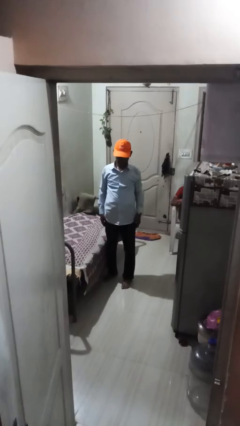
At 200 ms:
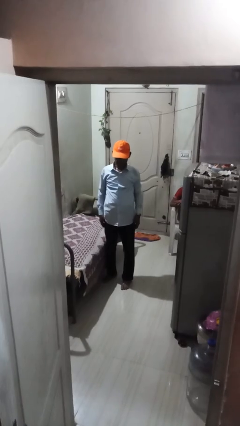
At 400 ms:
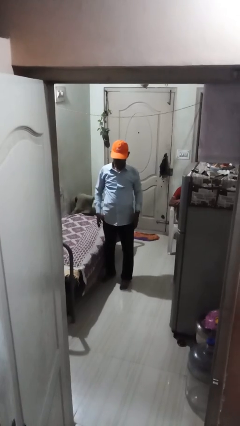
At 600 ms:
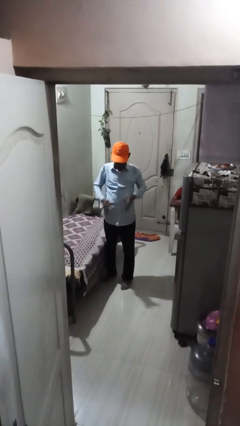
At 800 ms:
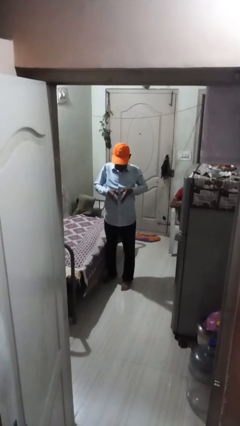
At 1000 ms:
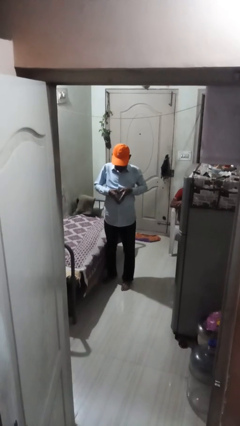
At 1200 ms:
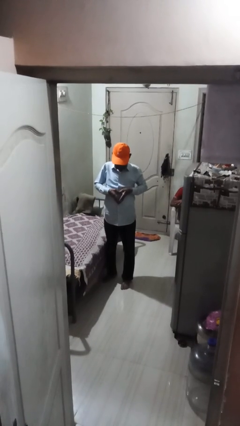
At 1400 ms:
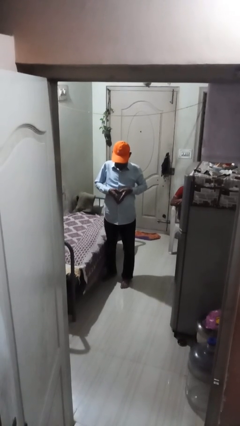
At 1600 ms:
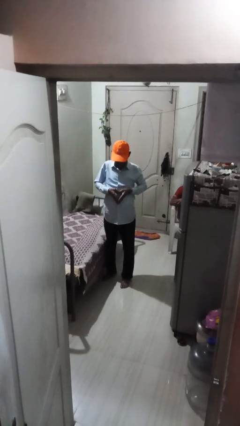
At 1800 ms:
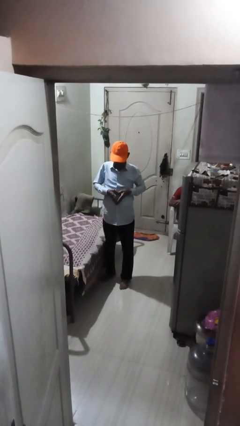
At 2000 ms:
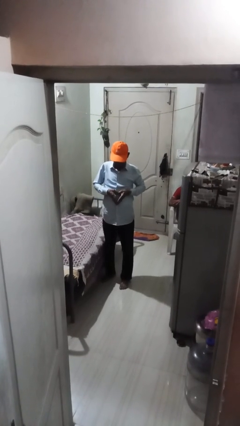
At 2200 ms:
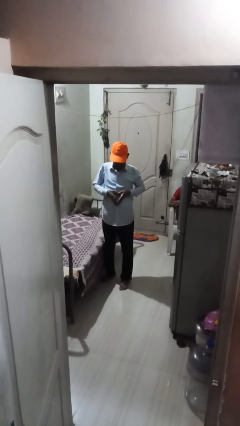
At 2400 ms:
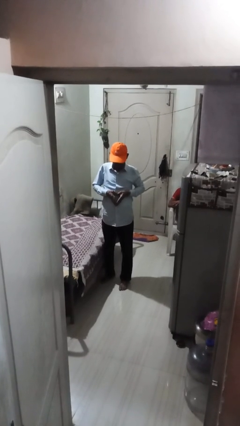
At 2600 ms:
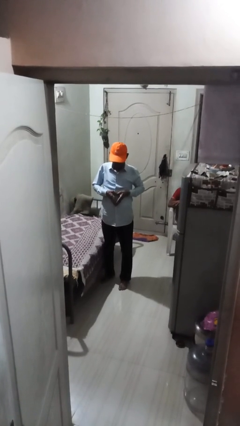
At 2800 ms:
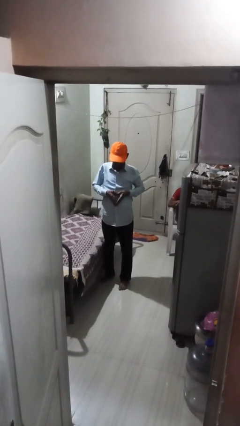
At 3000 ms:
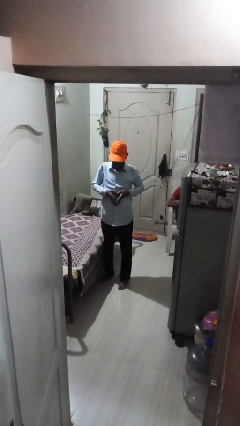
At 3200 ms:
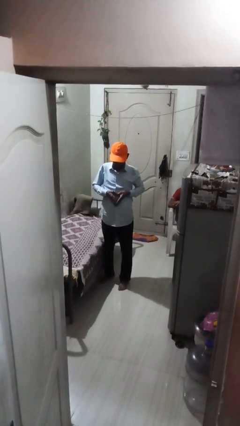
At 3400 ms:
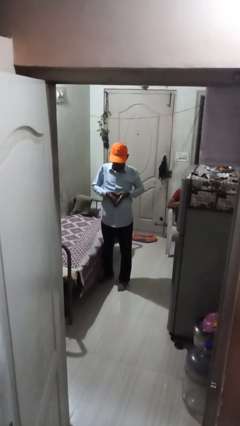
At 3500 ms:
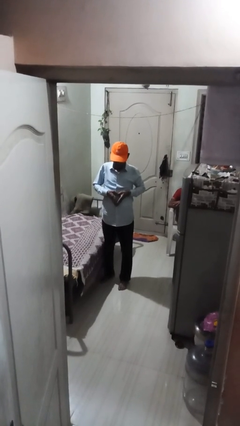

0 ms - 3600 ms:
person gestures heart

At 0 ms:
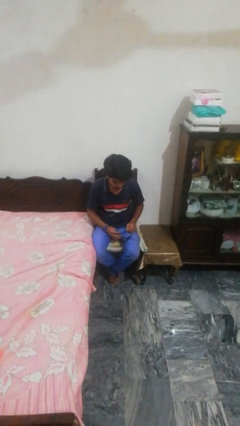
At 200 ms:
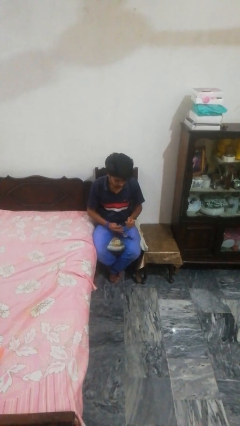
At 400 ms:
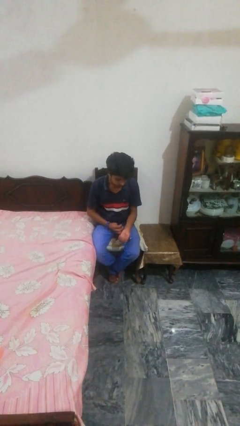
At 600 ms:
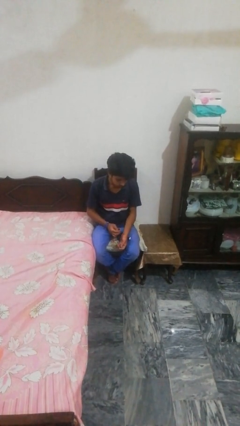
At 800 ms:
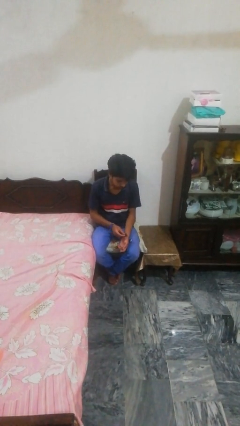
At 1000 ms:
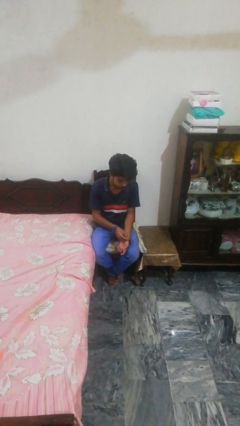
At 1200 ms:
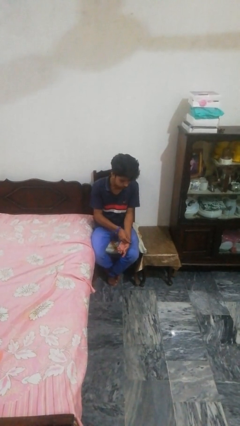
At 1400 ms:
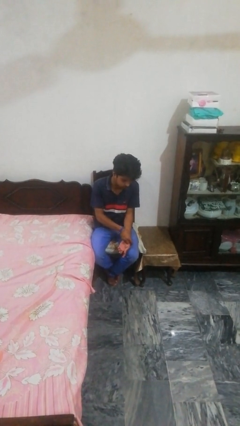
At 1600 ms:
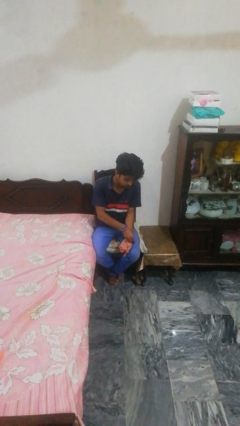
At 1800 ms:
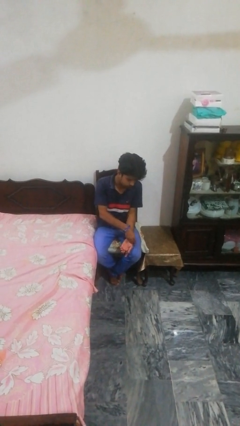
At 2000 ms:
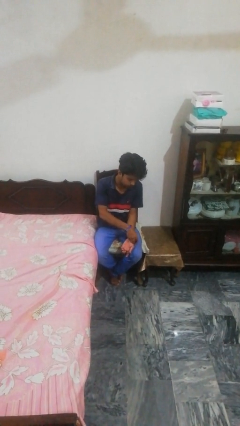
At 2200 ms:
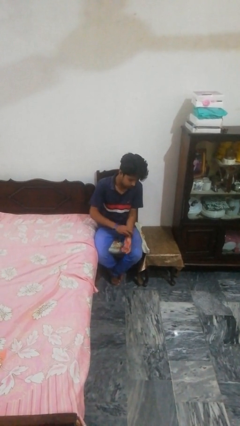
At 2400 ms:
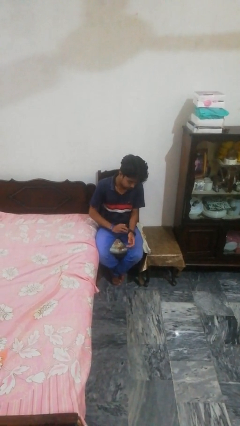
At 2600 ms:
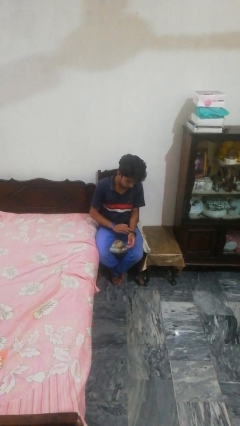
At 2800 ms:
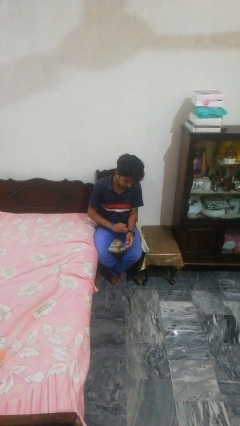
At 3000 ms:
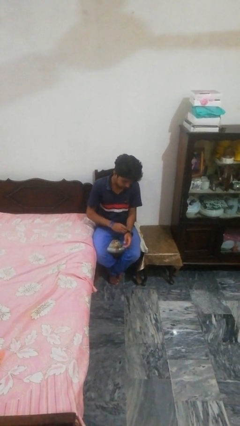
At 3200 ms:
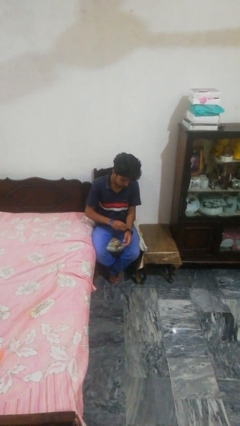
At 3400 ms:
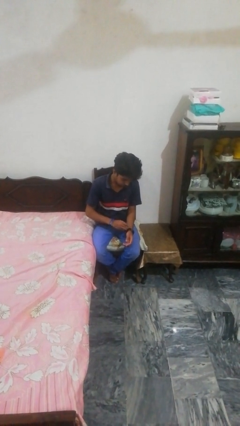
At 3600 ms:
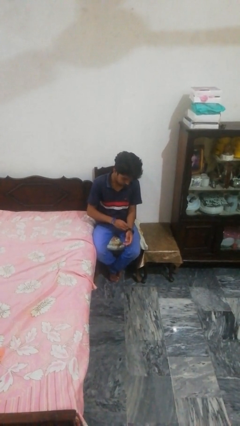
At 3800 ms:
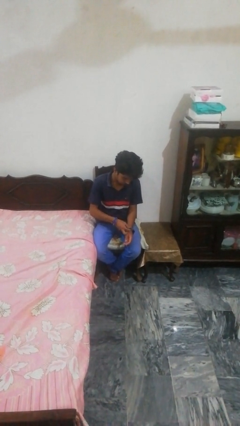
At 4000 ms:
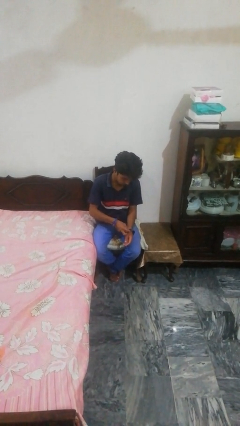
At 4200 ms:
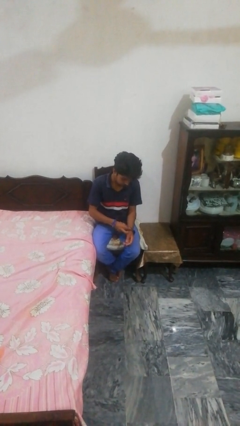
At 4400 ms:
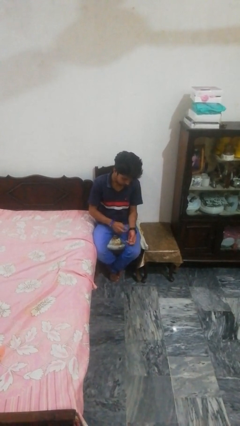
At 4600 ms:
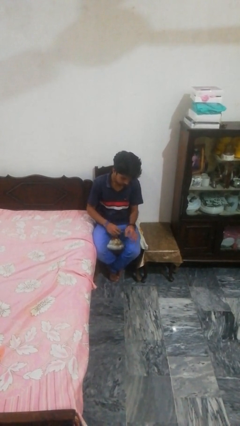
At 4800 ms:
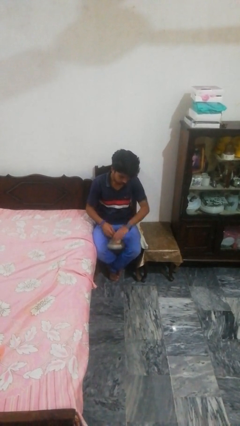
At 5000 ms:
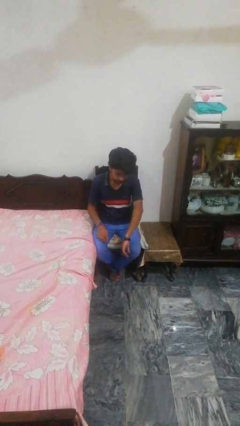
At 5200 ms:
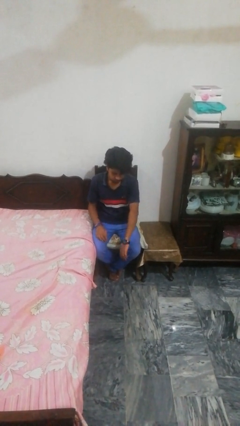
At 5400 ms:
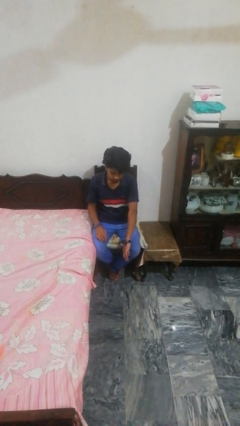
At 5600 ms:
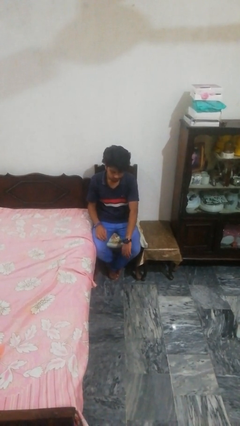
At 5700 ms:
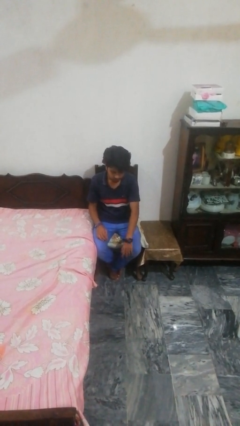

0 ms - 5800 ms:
person puts on wristwatch

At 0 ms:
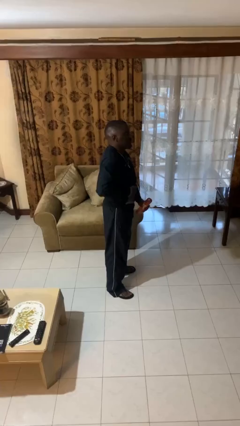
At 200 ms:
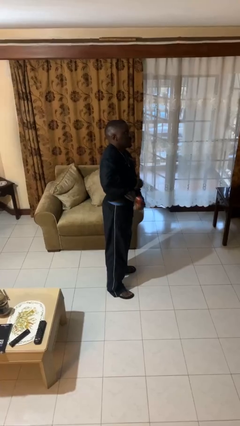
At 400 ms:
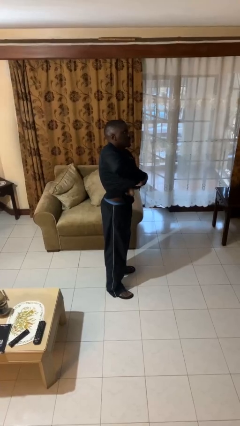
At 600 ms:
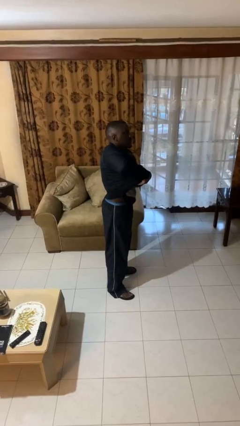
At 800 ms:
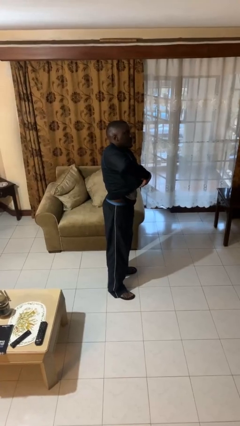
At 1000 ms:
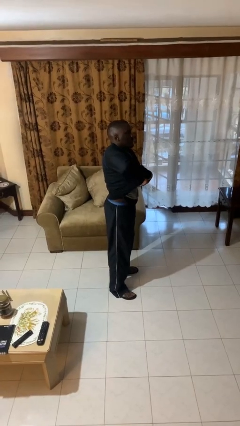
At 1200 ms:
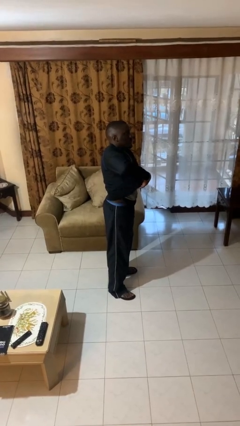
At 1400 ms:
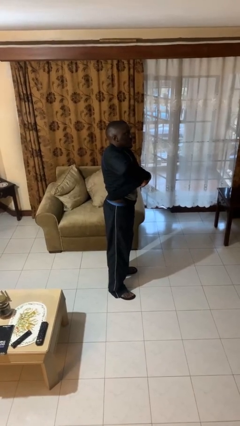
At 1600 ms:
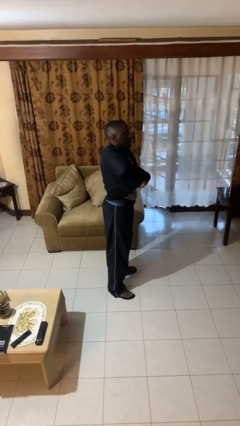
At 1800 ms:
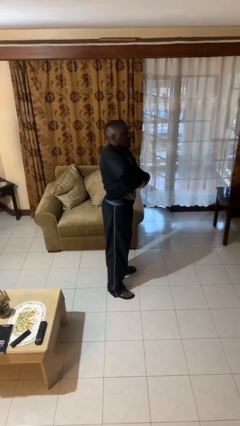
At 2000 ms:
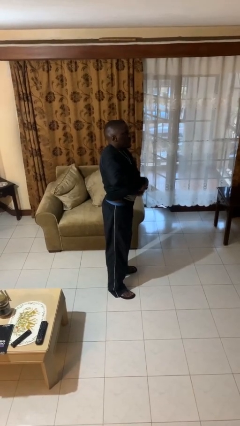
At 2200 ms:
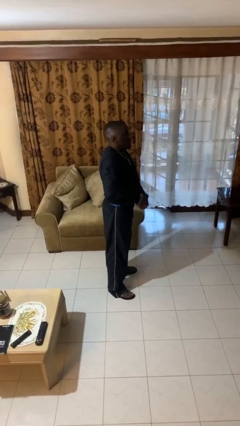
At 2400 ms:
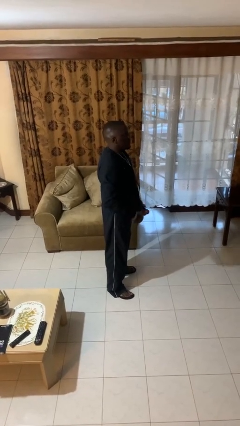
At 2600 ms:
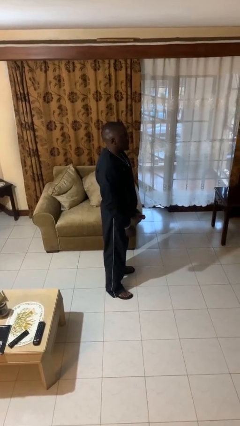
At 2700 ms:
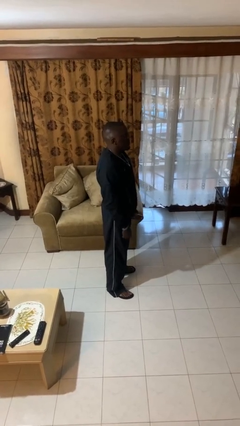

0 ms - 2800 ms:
person applies deodorant

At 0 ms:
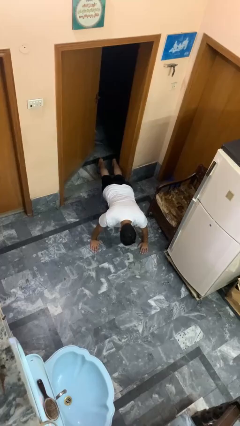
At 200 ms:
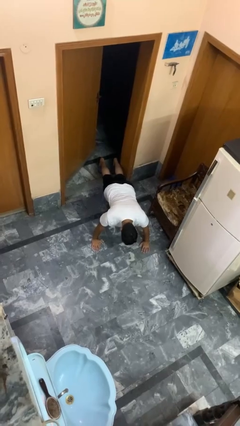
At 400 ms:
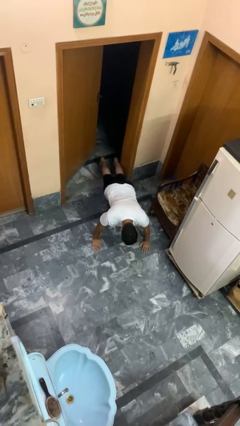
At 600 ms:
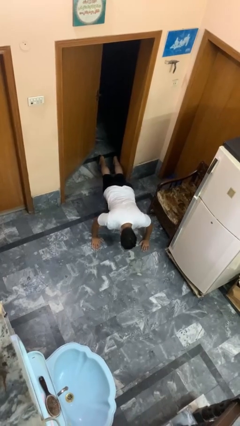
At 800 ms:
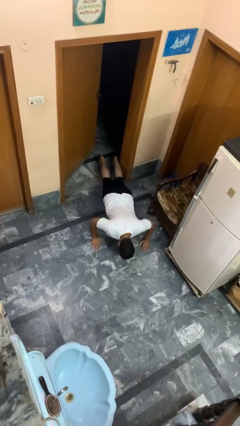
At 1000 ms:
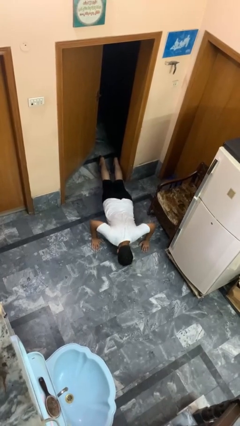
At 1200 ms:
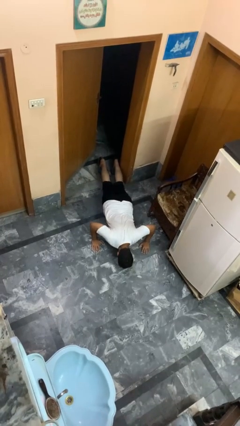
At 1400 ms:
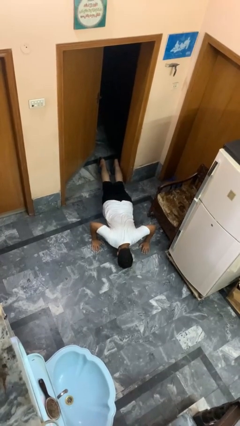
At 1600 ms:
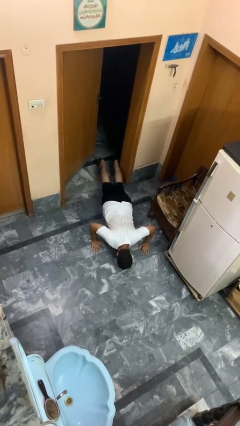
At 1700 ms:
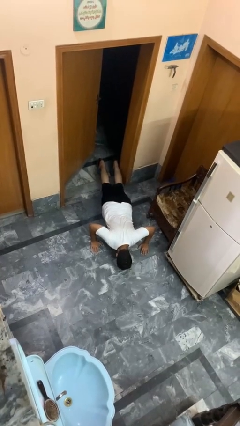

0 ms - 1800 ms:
person exercises with pushup

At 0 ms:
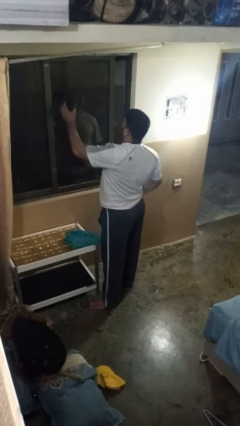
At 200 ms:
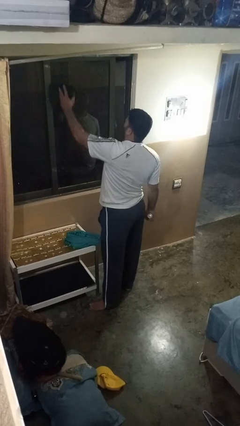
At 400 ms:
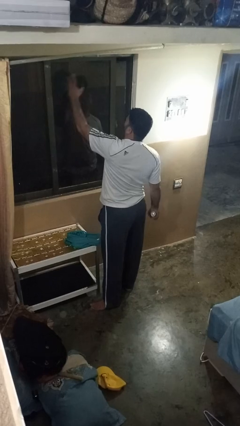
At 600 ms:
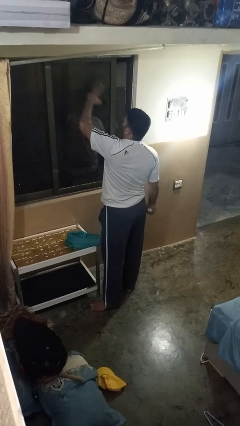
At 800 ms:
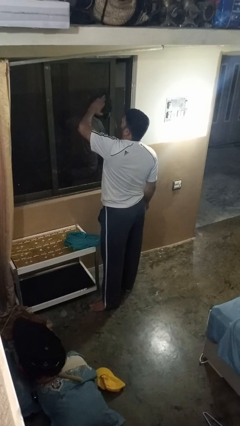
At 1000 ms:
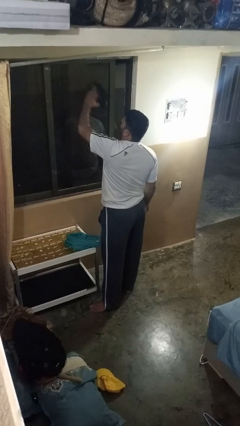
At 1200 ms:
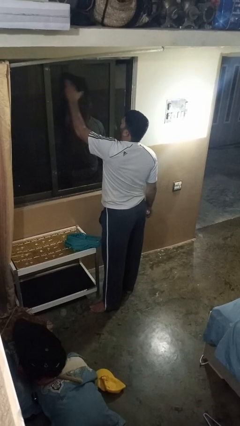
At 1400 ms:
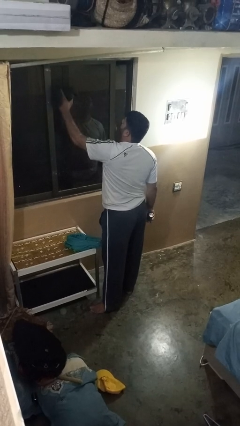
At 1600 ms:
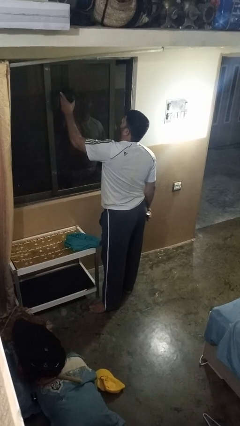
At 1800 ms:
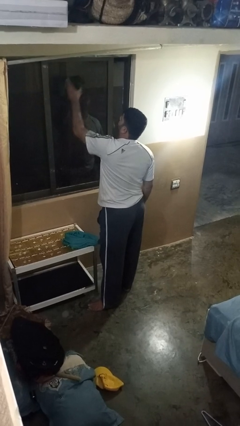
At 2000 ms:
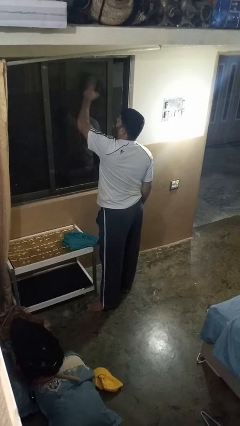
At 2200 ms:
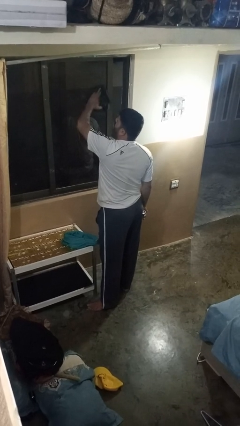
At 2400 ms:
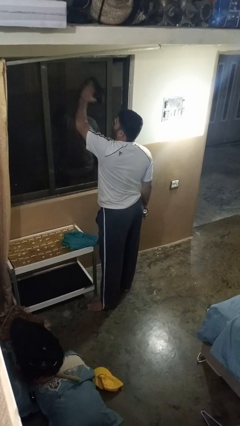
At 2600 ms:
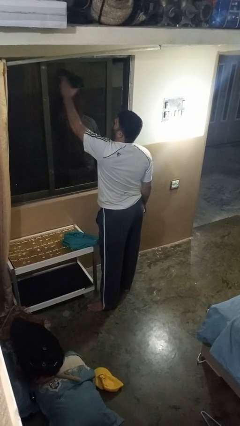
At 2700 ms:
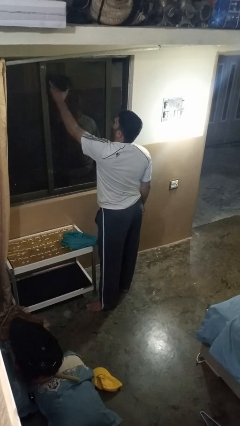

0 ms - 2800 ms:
person washes window

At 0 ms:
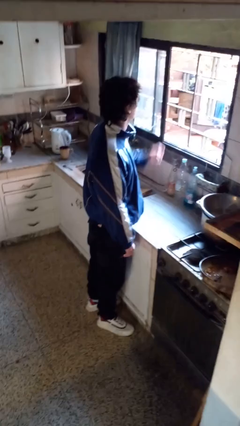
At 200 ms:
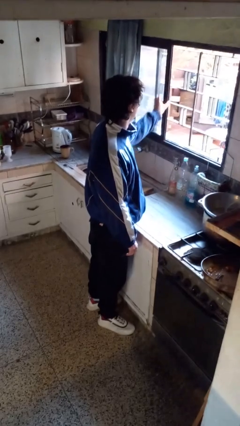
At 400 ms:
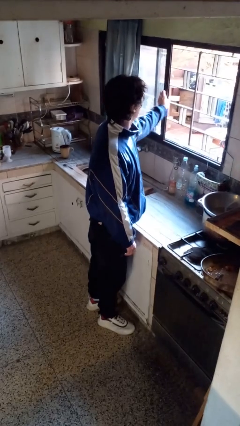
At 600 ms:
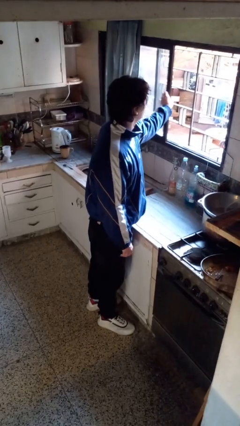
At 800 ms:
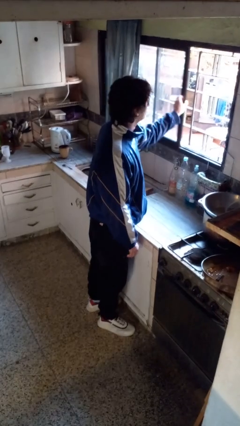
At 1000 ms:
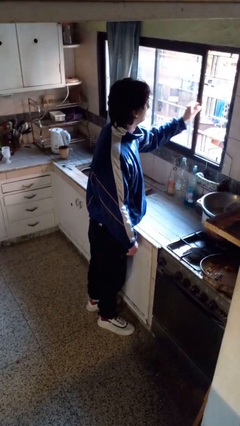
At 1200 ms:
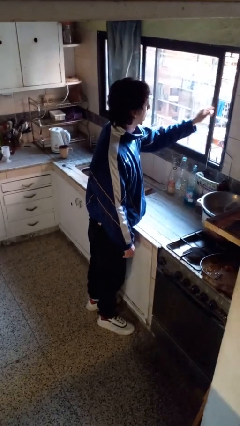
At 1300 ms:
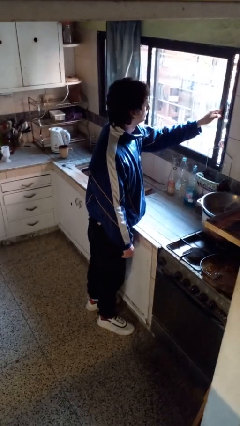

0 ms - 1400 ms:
person closes home window
